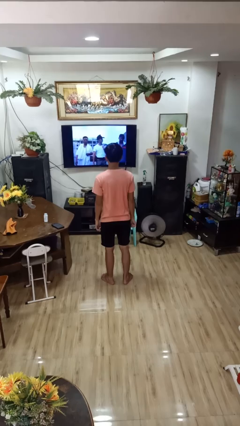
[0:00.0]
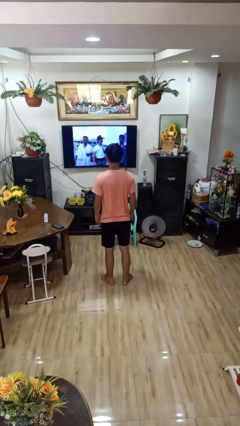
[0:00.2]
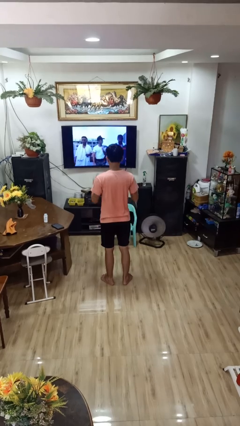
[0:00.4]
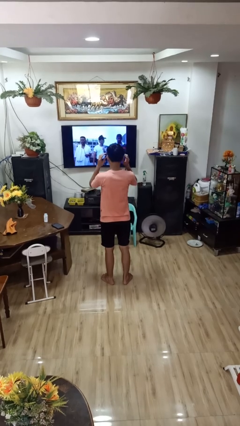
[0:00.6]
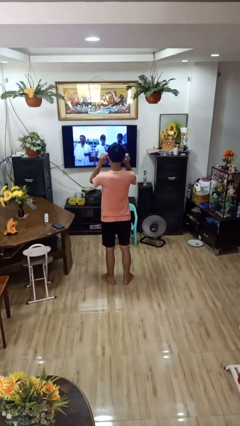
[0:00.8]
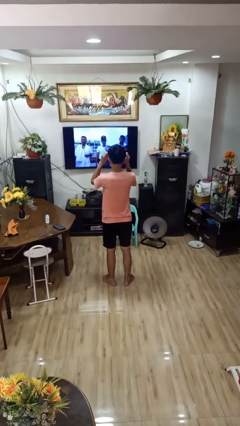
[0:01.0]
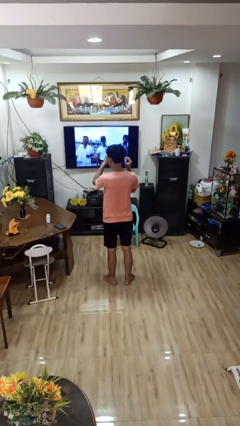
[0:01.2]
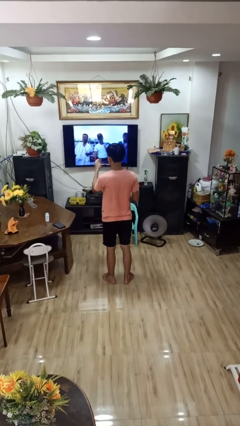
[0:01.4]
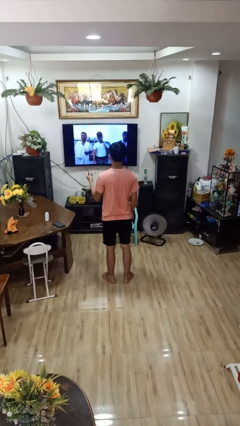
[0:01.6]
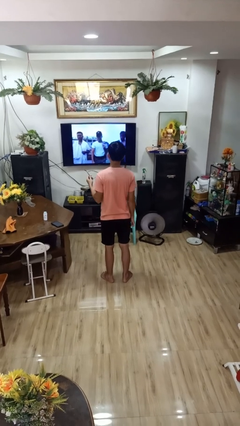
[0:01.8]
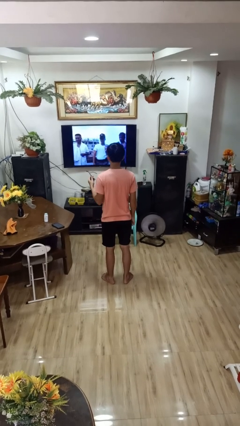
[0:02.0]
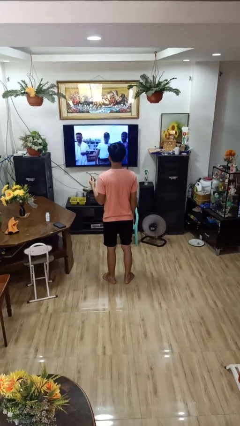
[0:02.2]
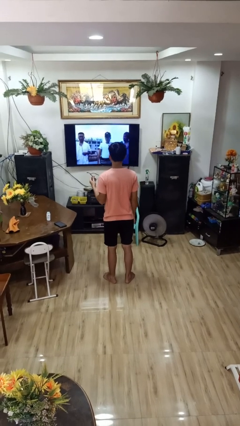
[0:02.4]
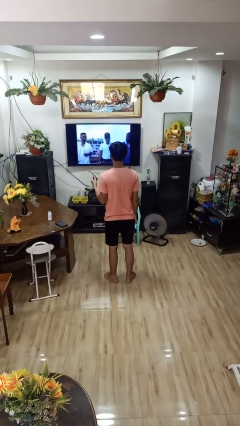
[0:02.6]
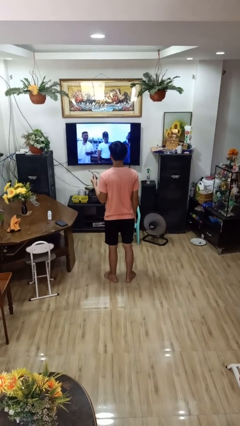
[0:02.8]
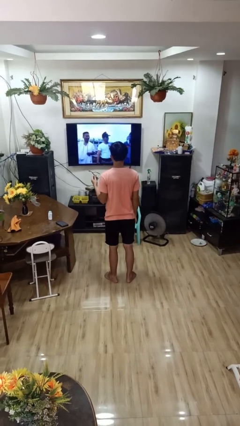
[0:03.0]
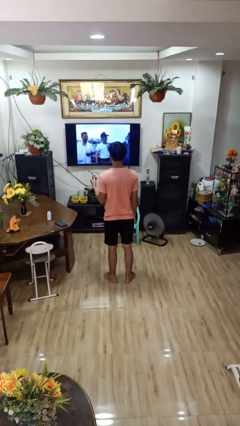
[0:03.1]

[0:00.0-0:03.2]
person takes off glasses

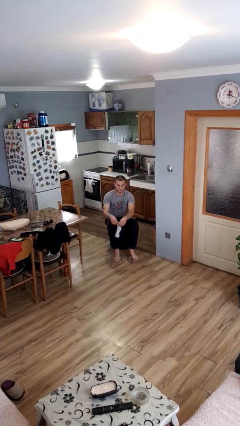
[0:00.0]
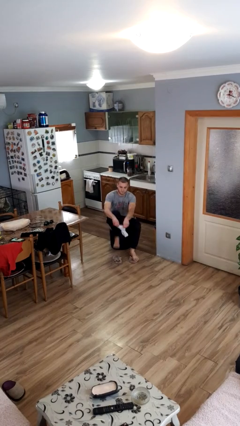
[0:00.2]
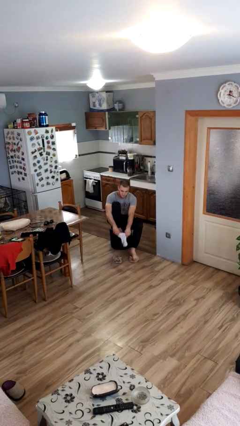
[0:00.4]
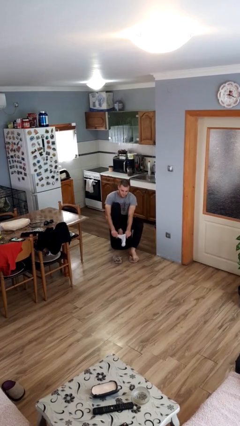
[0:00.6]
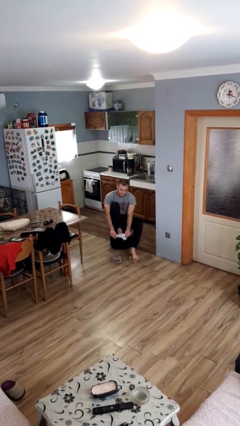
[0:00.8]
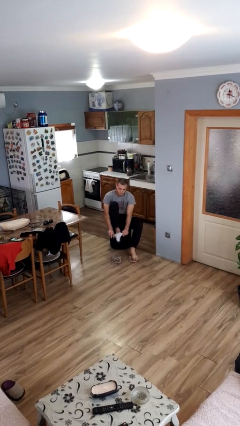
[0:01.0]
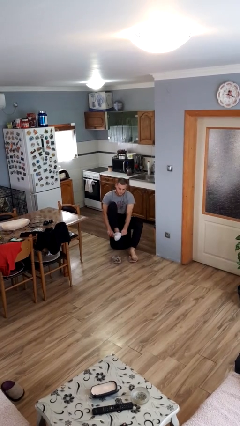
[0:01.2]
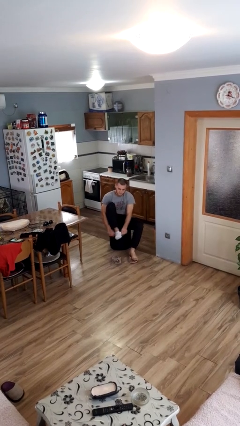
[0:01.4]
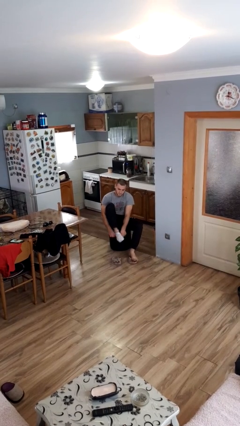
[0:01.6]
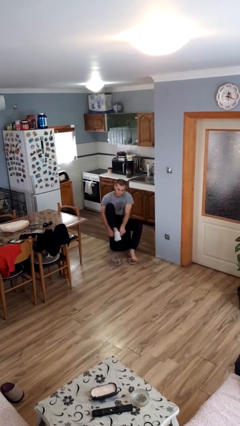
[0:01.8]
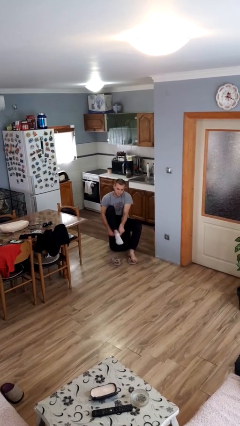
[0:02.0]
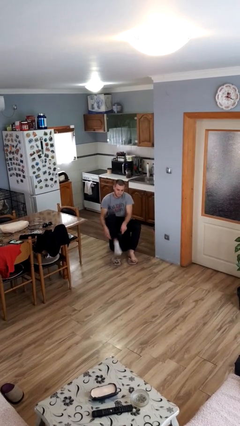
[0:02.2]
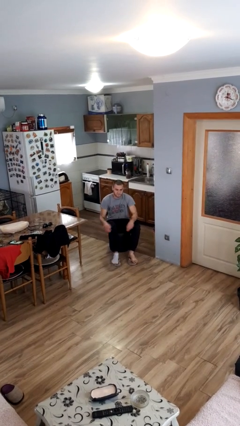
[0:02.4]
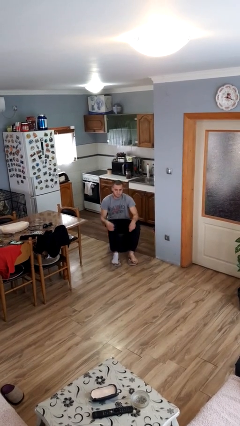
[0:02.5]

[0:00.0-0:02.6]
person puts on socks

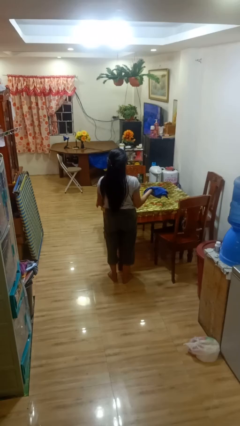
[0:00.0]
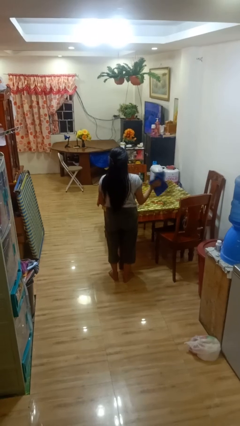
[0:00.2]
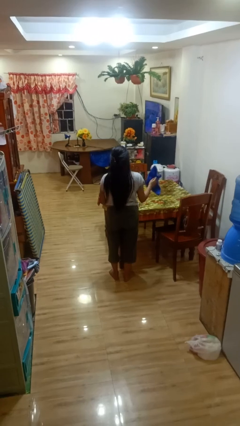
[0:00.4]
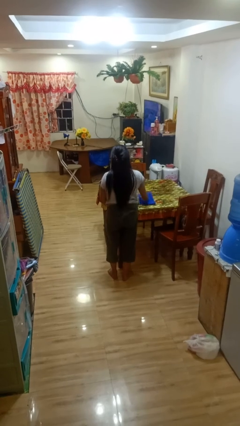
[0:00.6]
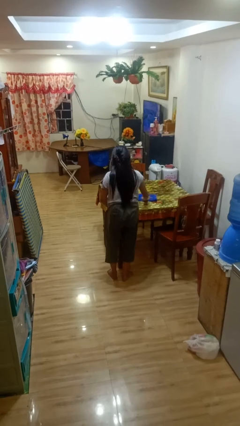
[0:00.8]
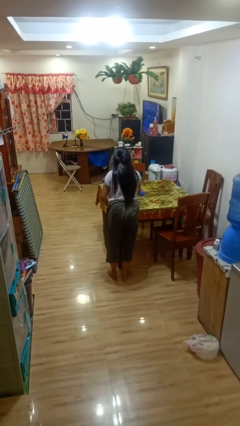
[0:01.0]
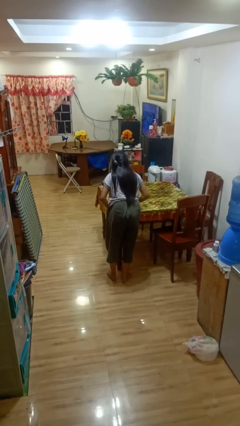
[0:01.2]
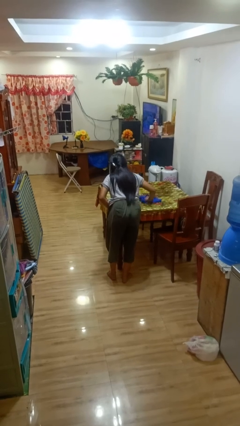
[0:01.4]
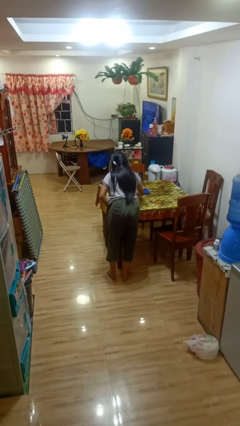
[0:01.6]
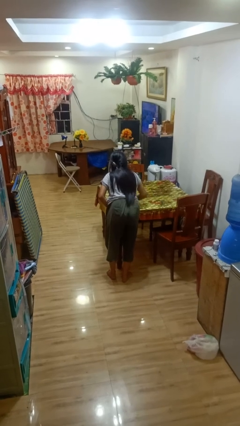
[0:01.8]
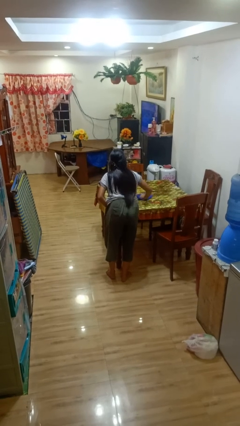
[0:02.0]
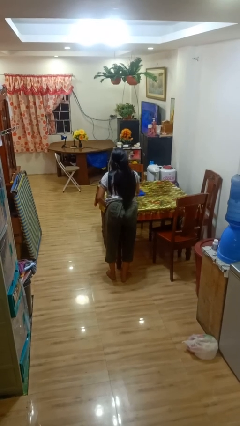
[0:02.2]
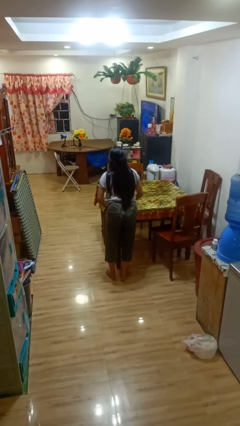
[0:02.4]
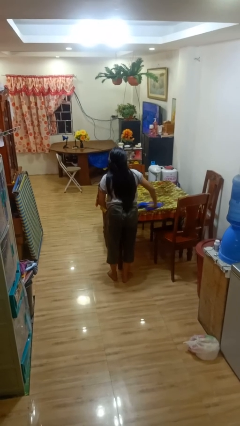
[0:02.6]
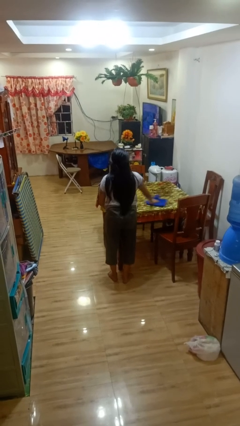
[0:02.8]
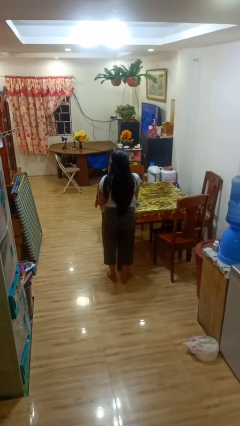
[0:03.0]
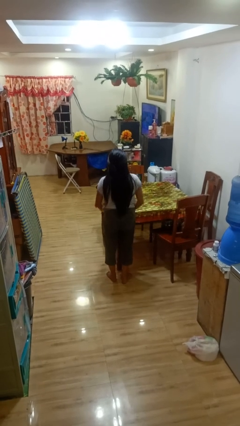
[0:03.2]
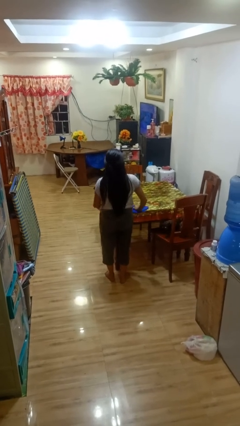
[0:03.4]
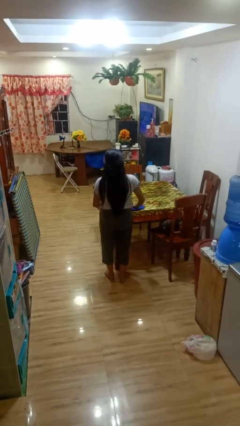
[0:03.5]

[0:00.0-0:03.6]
person cleans table with rag

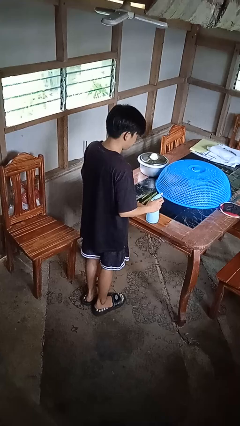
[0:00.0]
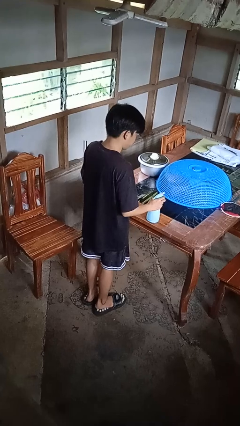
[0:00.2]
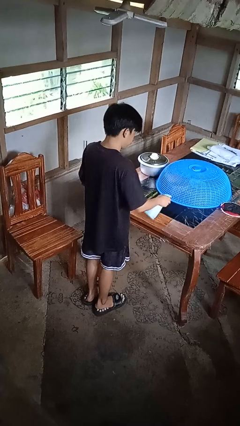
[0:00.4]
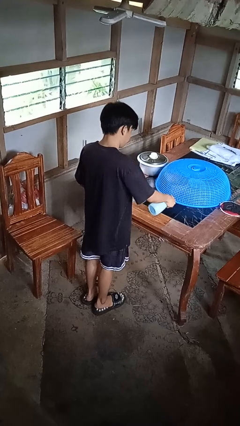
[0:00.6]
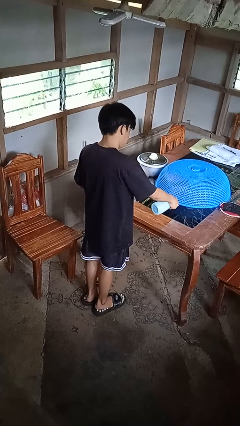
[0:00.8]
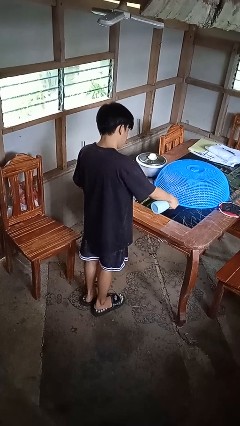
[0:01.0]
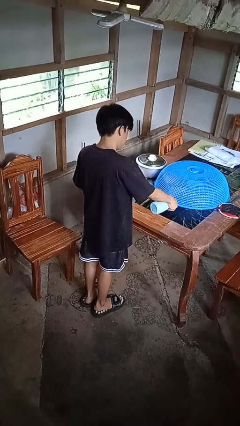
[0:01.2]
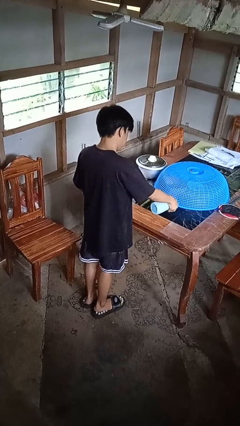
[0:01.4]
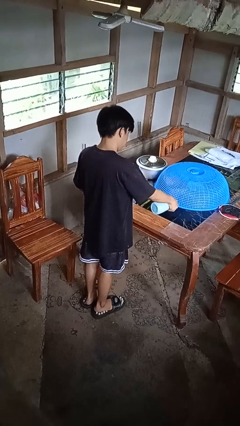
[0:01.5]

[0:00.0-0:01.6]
person sprays from bottle

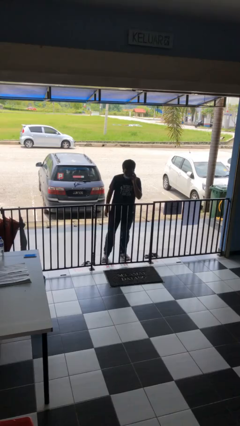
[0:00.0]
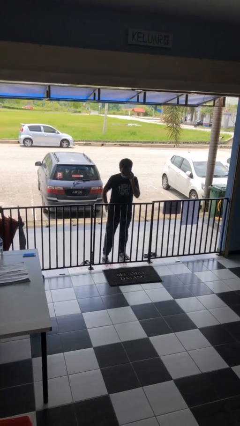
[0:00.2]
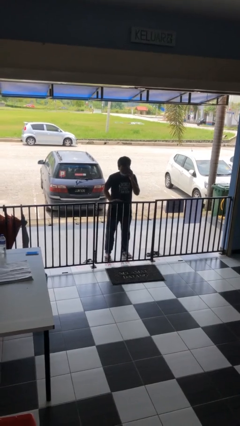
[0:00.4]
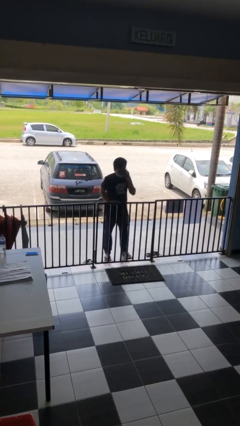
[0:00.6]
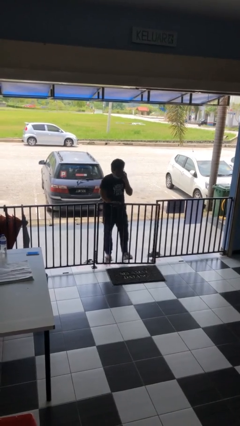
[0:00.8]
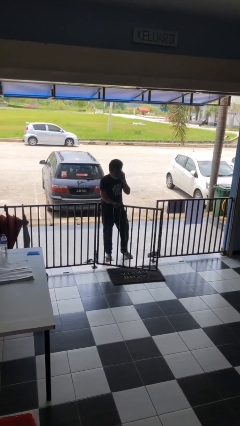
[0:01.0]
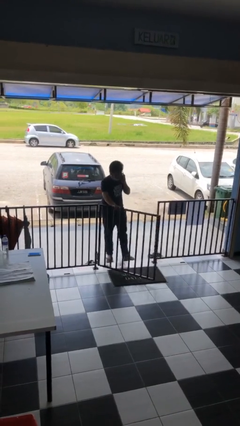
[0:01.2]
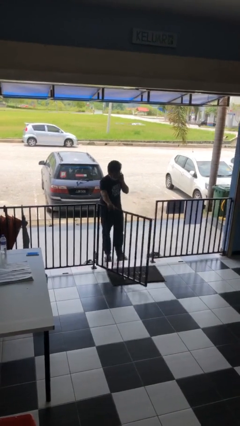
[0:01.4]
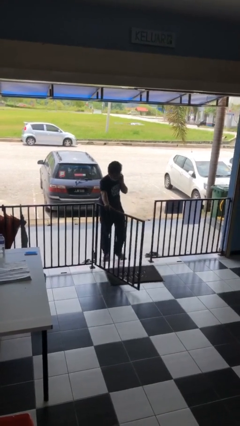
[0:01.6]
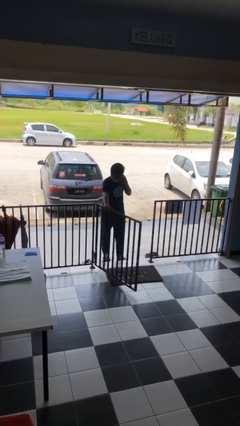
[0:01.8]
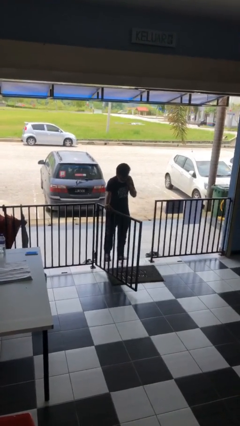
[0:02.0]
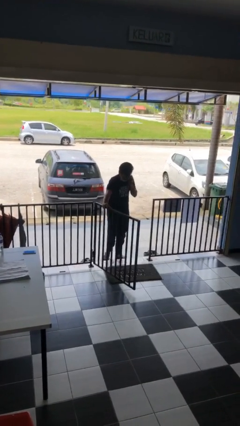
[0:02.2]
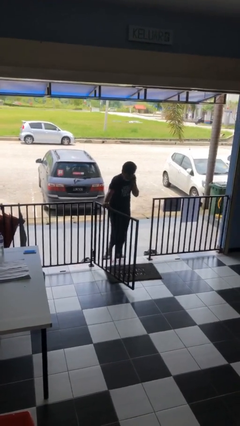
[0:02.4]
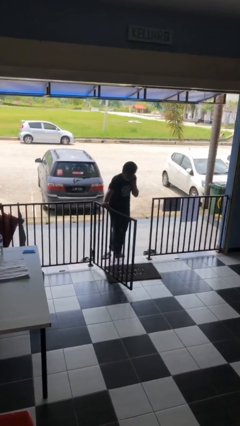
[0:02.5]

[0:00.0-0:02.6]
person opens facility door

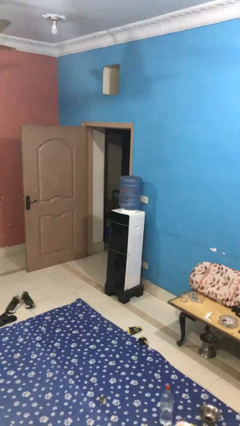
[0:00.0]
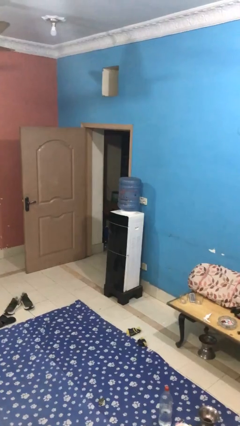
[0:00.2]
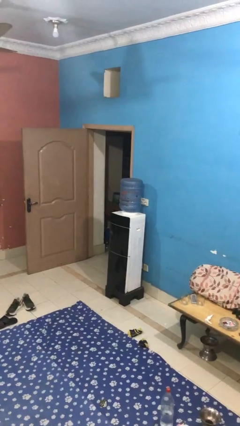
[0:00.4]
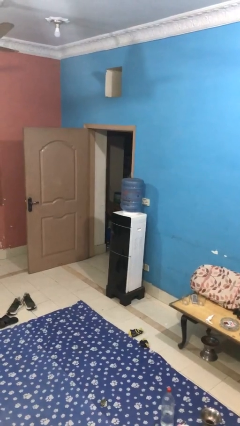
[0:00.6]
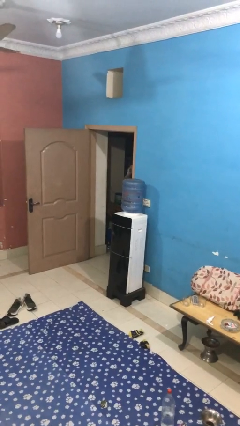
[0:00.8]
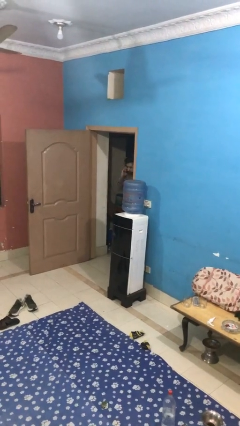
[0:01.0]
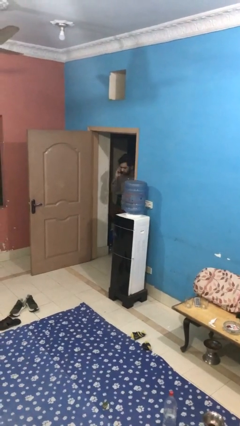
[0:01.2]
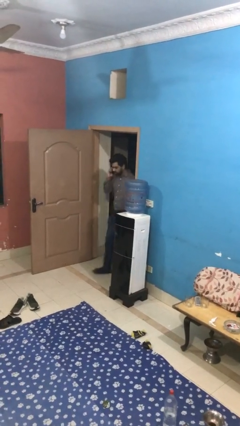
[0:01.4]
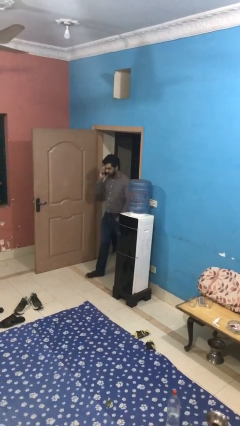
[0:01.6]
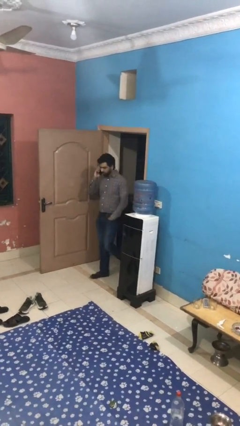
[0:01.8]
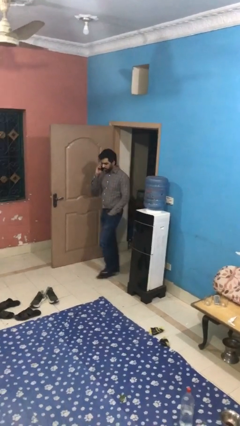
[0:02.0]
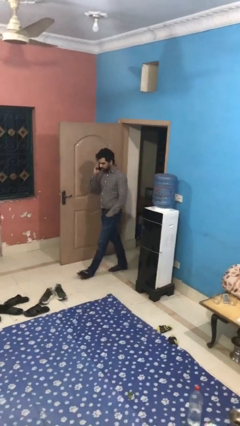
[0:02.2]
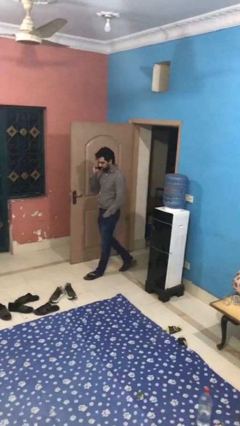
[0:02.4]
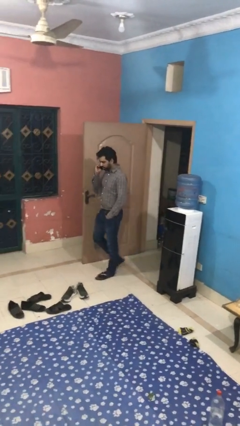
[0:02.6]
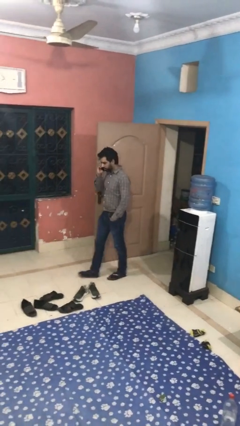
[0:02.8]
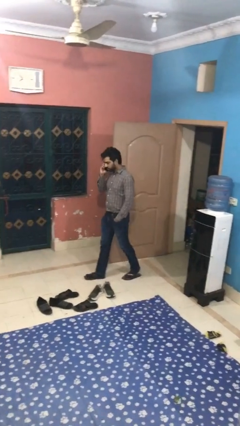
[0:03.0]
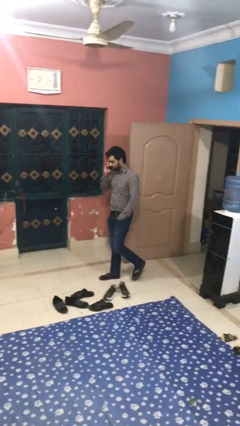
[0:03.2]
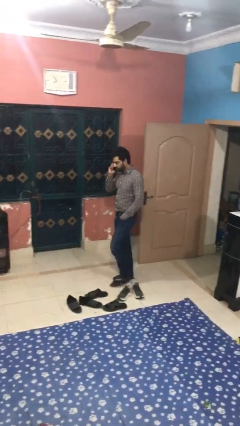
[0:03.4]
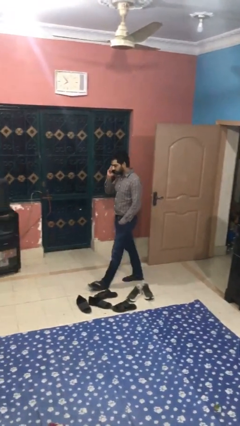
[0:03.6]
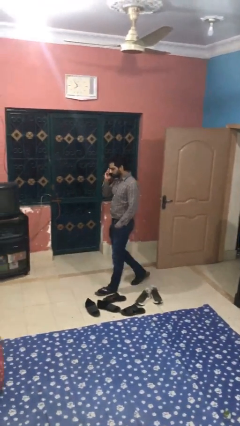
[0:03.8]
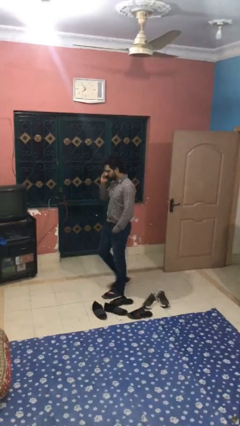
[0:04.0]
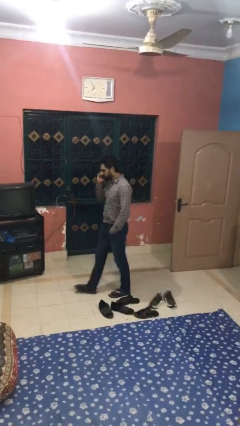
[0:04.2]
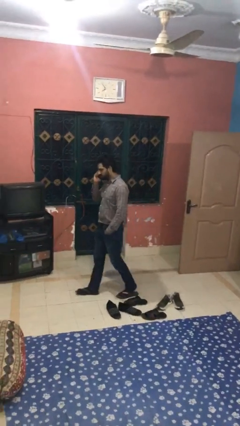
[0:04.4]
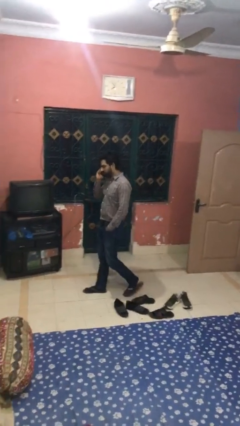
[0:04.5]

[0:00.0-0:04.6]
person enters scene through structure
